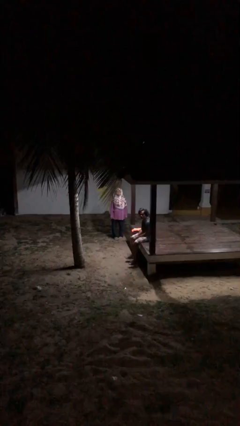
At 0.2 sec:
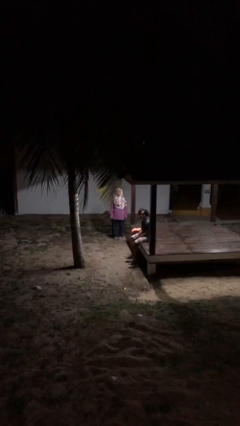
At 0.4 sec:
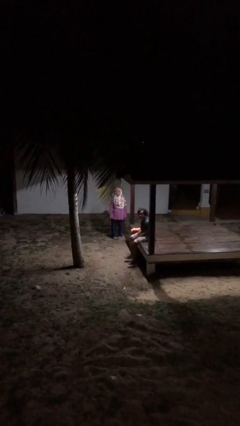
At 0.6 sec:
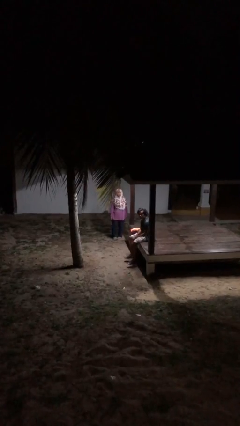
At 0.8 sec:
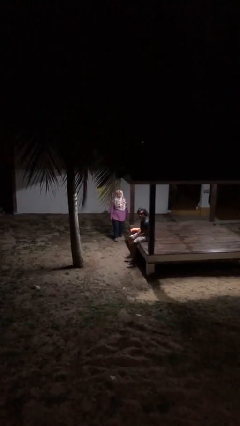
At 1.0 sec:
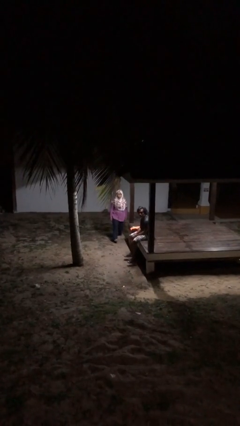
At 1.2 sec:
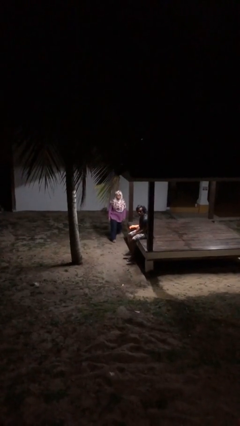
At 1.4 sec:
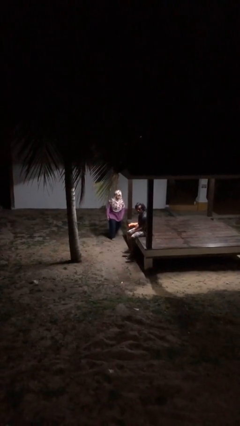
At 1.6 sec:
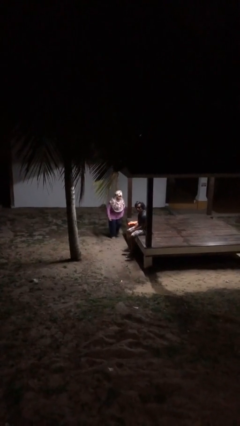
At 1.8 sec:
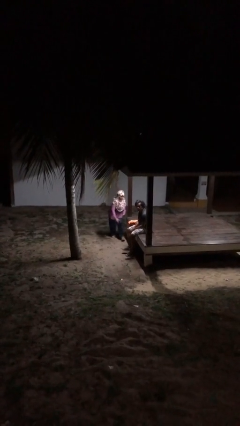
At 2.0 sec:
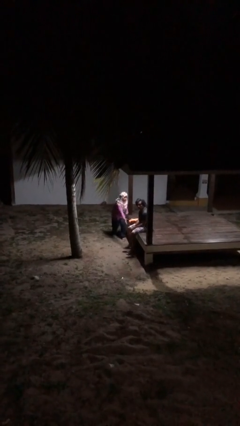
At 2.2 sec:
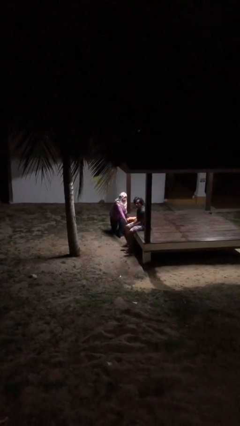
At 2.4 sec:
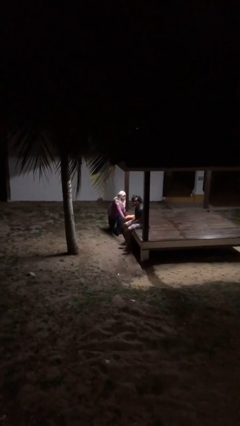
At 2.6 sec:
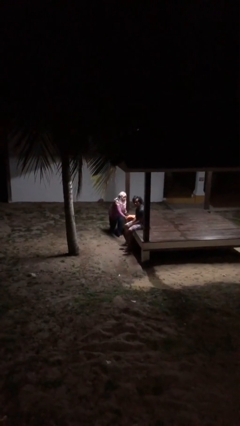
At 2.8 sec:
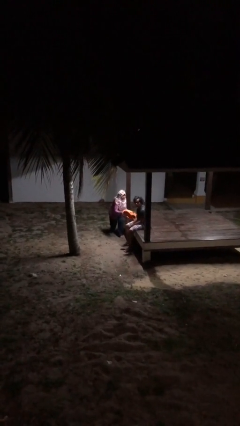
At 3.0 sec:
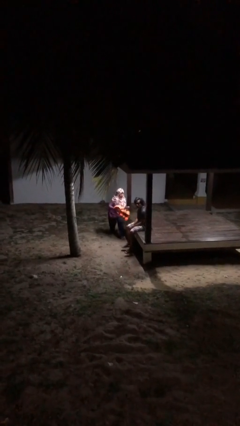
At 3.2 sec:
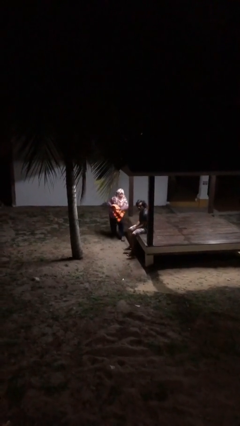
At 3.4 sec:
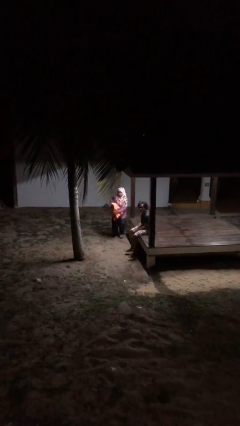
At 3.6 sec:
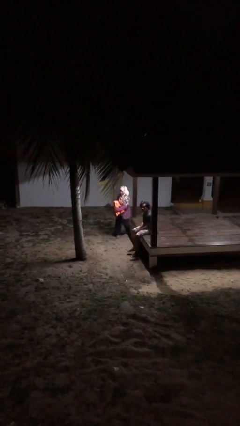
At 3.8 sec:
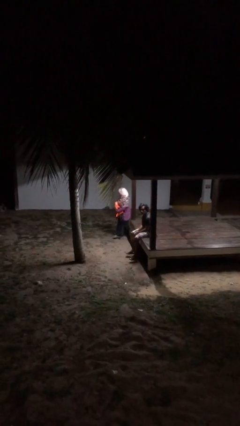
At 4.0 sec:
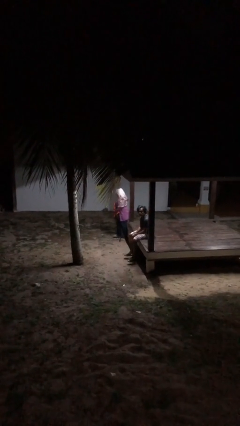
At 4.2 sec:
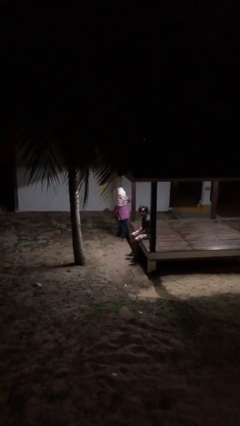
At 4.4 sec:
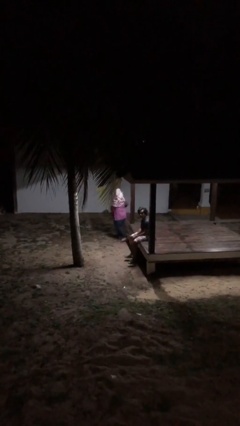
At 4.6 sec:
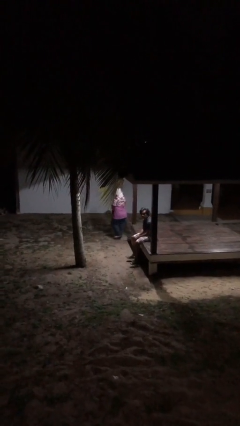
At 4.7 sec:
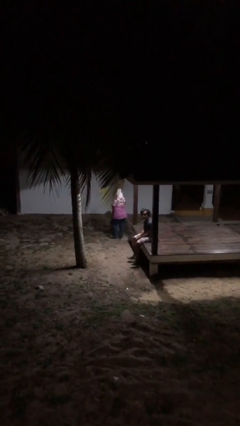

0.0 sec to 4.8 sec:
person steals object from person

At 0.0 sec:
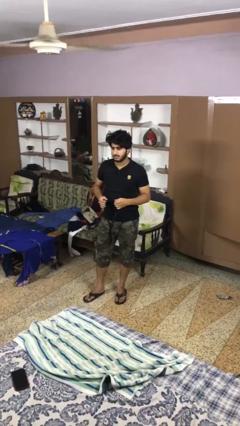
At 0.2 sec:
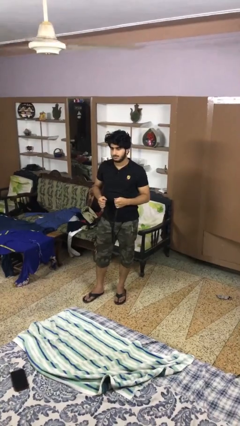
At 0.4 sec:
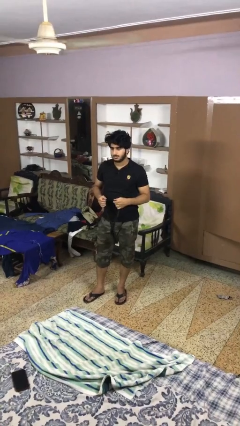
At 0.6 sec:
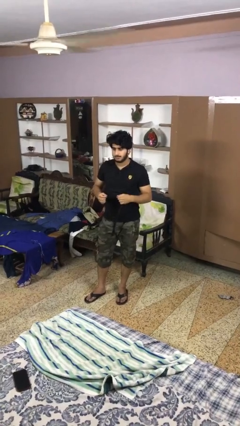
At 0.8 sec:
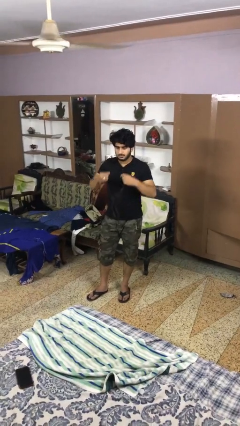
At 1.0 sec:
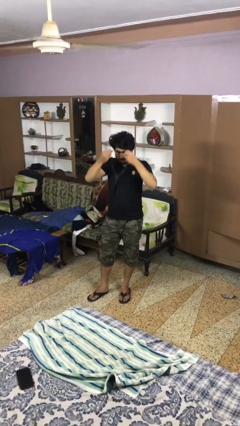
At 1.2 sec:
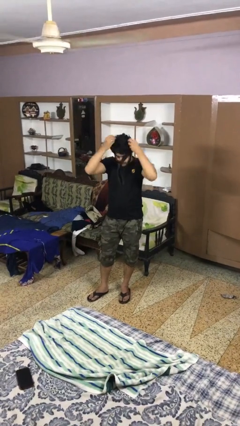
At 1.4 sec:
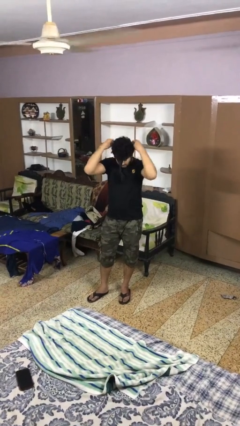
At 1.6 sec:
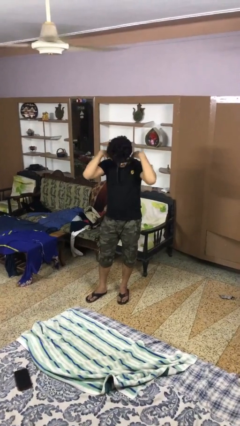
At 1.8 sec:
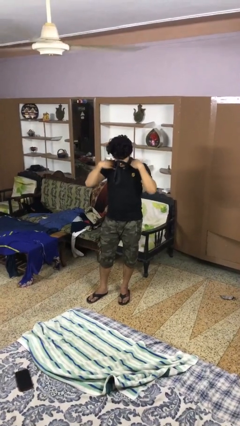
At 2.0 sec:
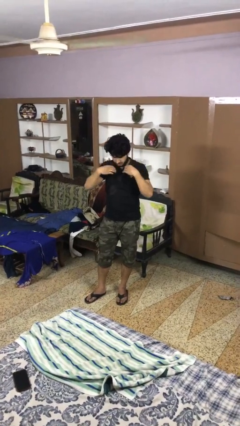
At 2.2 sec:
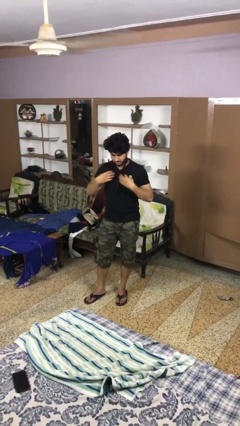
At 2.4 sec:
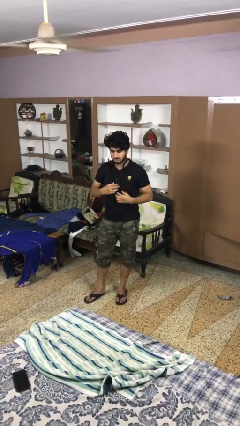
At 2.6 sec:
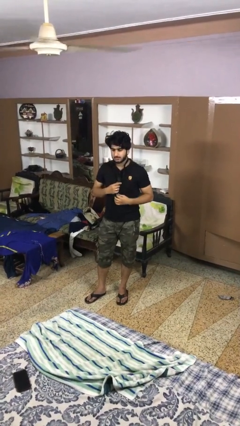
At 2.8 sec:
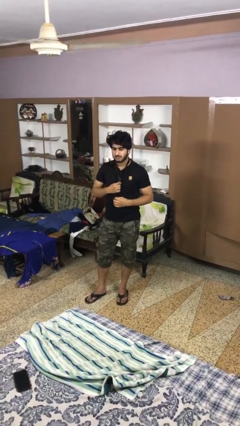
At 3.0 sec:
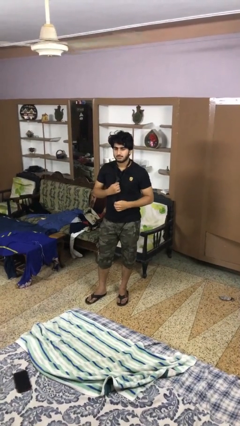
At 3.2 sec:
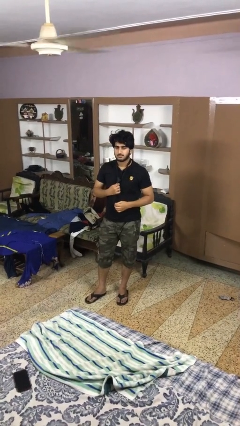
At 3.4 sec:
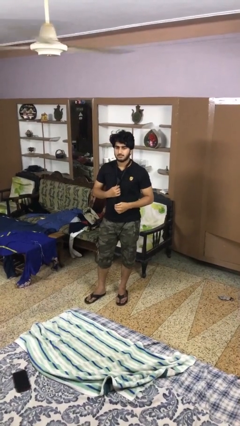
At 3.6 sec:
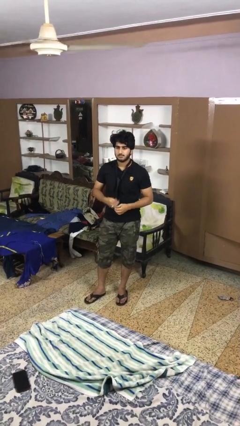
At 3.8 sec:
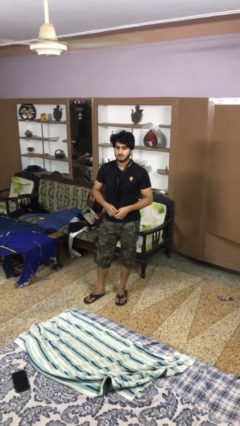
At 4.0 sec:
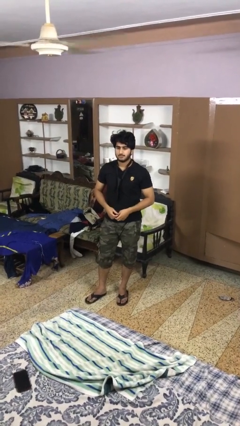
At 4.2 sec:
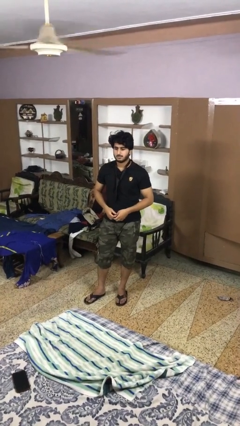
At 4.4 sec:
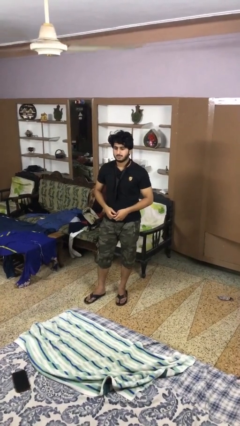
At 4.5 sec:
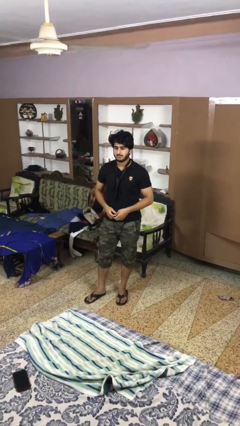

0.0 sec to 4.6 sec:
person puts on necktie

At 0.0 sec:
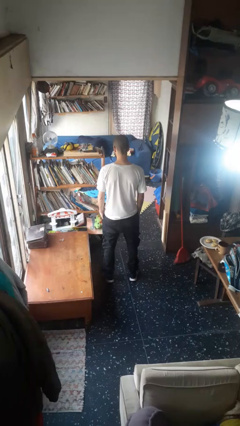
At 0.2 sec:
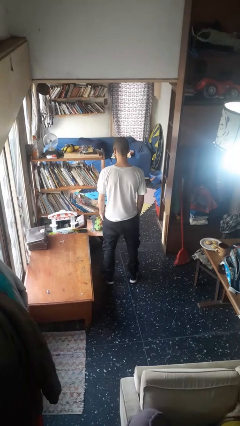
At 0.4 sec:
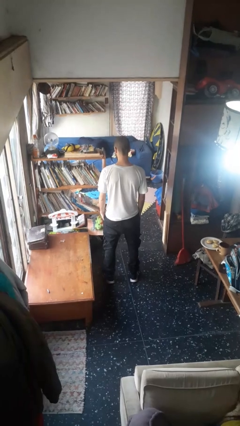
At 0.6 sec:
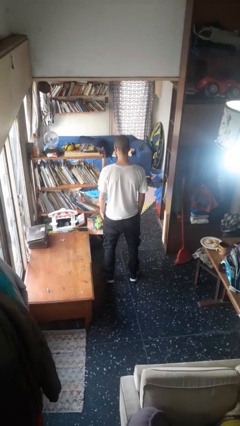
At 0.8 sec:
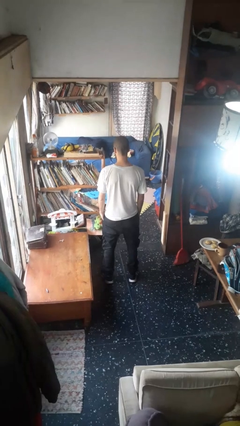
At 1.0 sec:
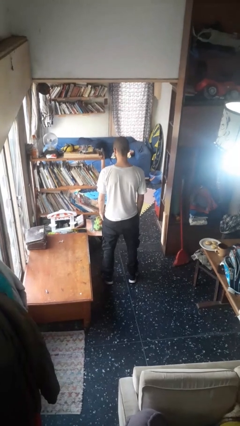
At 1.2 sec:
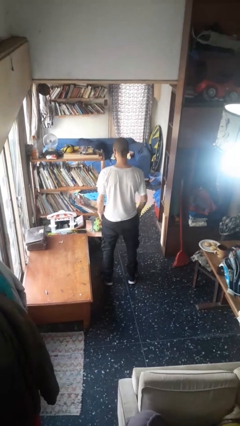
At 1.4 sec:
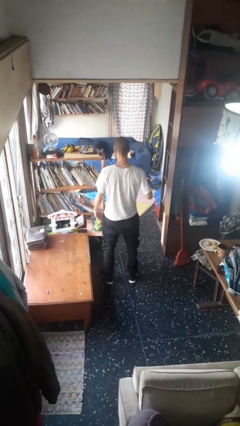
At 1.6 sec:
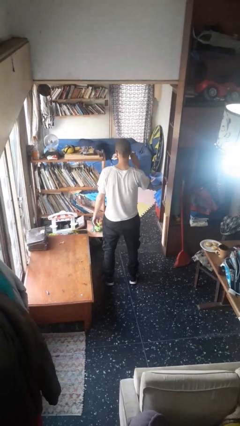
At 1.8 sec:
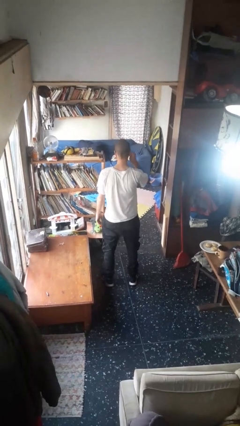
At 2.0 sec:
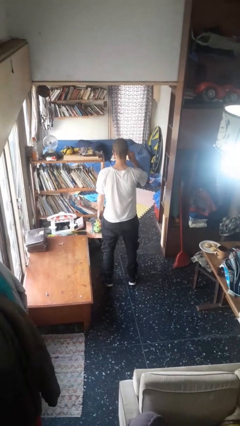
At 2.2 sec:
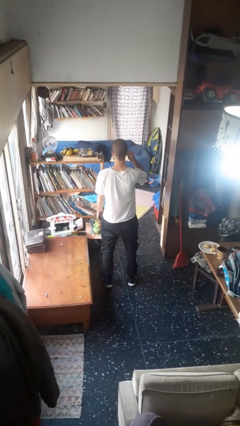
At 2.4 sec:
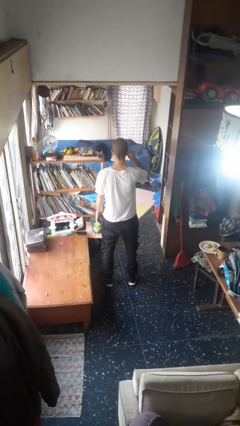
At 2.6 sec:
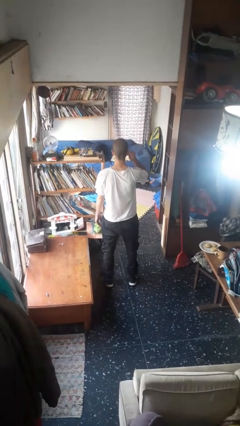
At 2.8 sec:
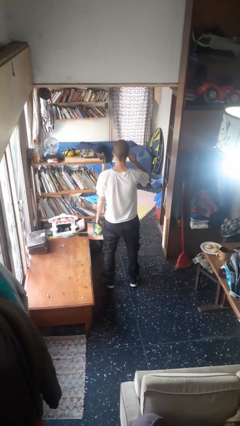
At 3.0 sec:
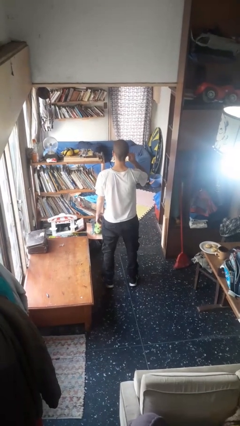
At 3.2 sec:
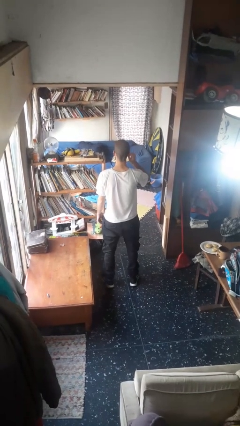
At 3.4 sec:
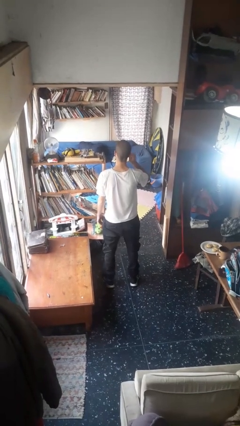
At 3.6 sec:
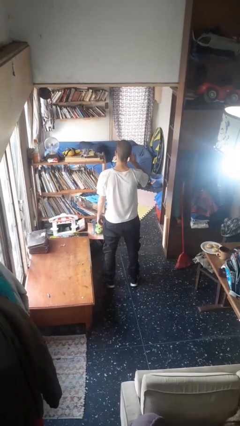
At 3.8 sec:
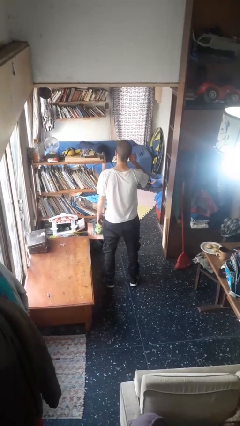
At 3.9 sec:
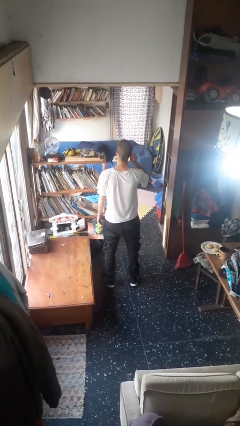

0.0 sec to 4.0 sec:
person touches earlobe

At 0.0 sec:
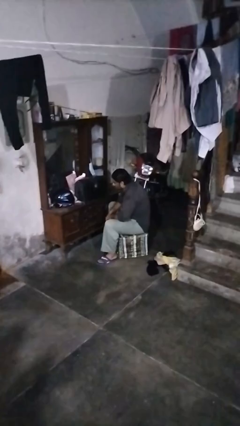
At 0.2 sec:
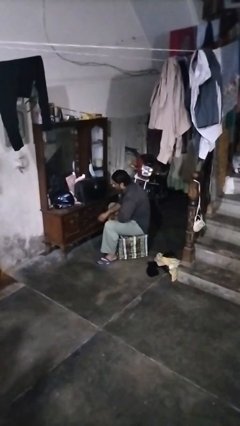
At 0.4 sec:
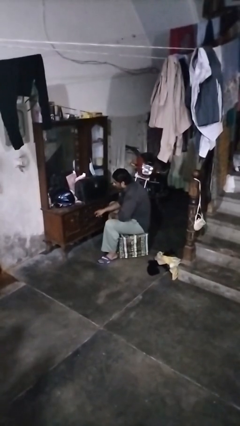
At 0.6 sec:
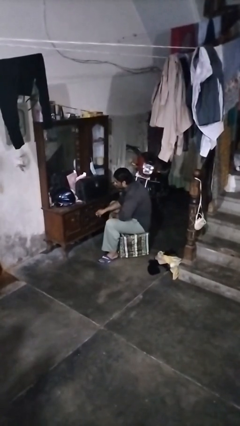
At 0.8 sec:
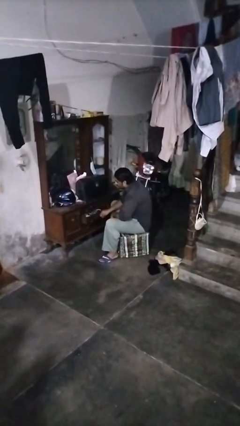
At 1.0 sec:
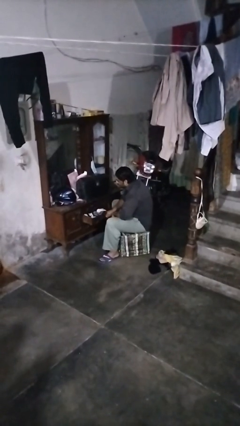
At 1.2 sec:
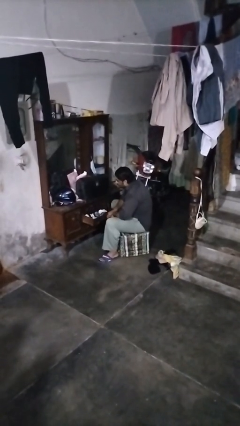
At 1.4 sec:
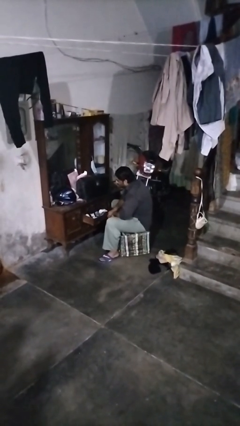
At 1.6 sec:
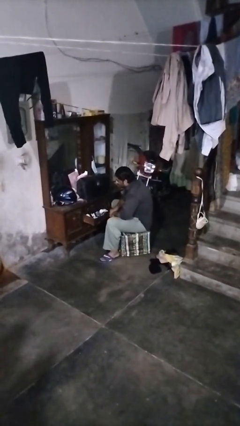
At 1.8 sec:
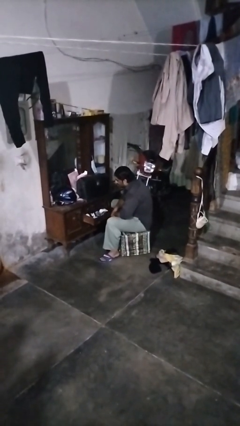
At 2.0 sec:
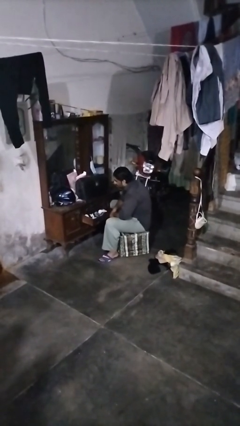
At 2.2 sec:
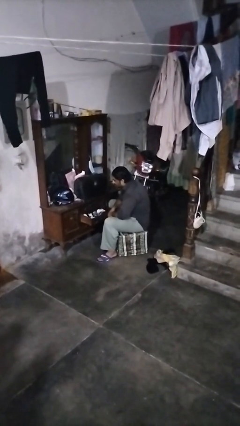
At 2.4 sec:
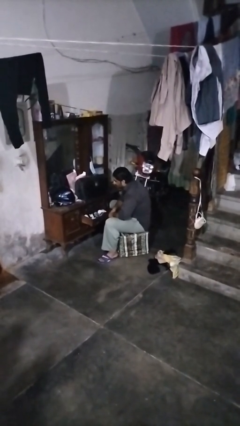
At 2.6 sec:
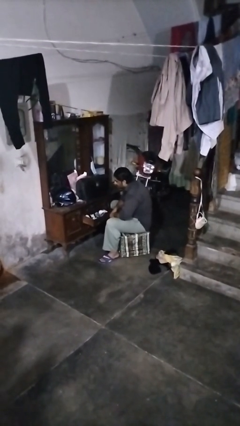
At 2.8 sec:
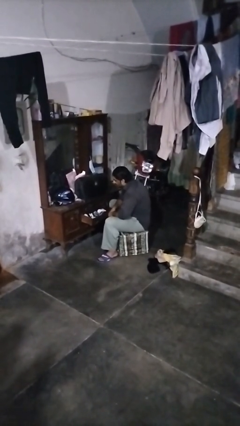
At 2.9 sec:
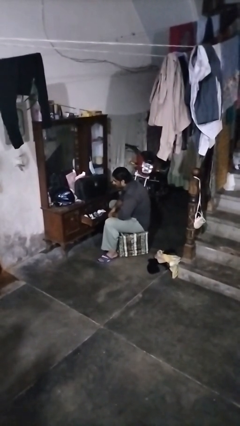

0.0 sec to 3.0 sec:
person opens dresser drawer

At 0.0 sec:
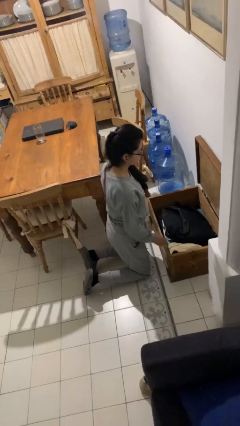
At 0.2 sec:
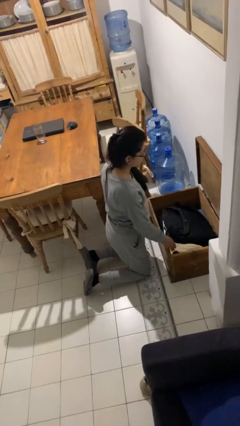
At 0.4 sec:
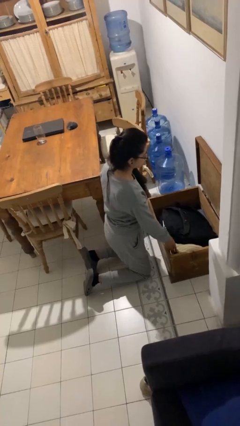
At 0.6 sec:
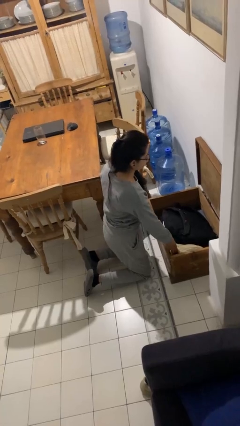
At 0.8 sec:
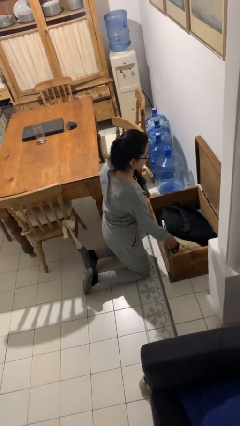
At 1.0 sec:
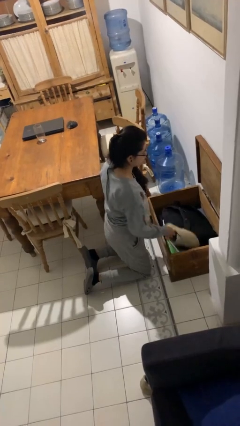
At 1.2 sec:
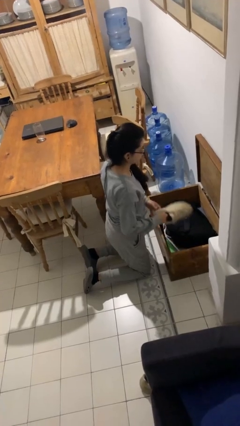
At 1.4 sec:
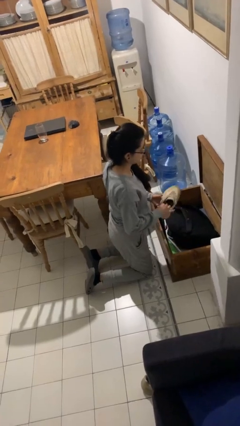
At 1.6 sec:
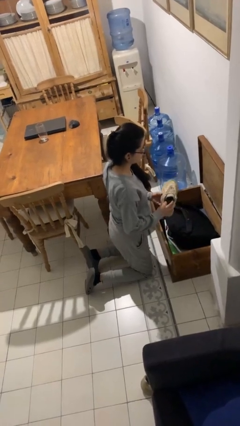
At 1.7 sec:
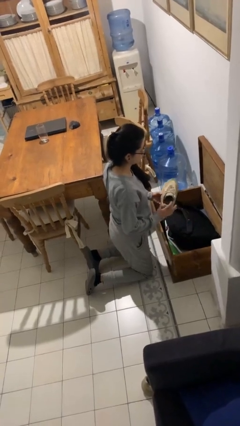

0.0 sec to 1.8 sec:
person takes object from box
